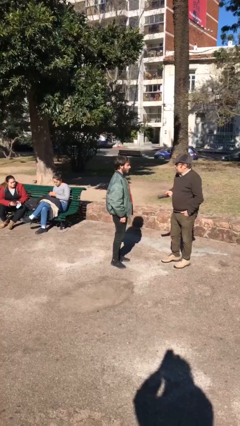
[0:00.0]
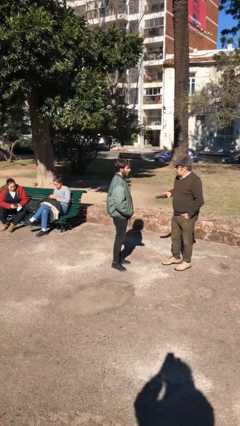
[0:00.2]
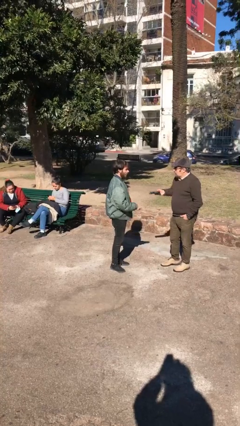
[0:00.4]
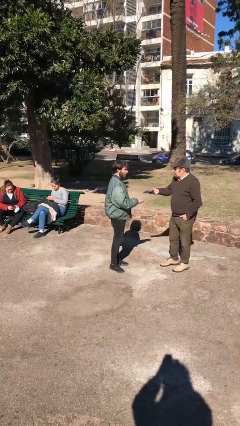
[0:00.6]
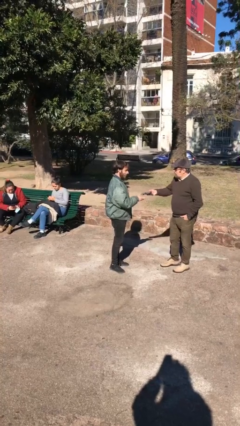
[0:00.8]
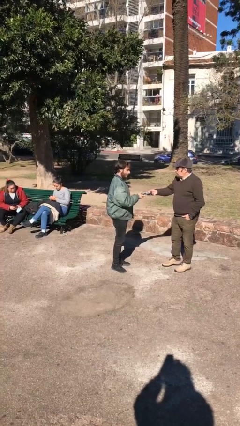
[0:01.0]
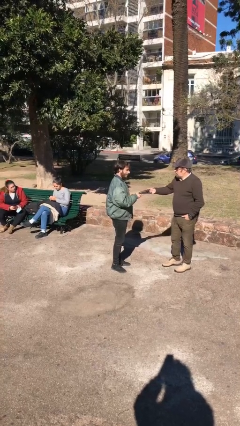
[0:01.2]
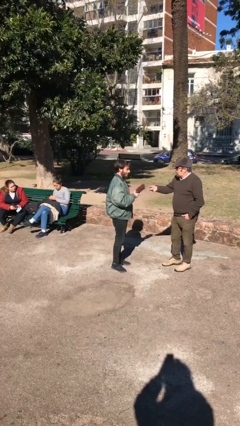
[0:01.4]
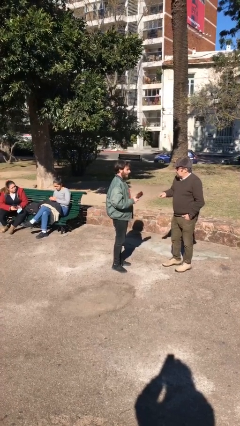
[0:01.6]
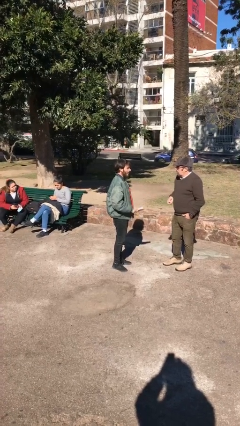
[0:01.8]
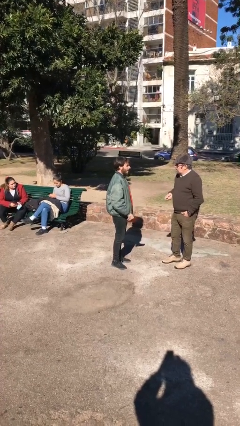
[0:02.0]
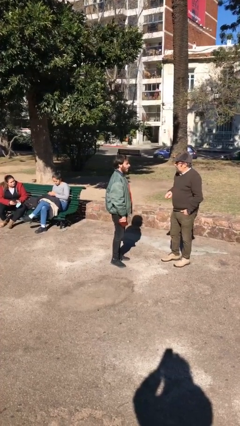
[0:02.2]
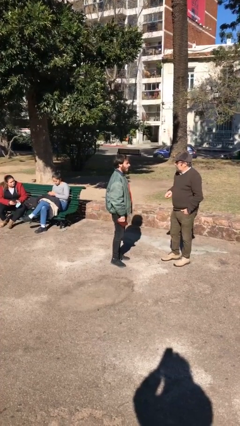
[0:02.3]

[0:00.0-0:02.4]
person transfers object to person

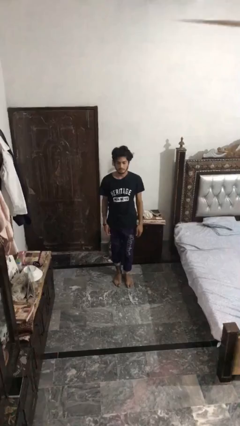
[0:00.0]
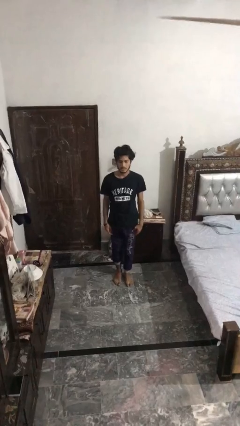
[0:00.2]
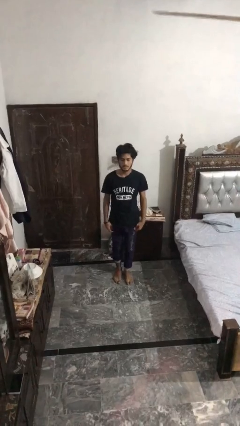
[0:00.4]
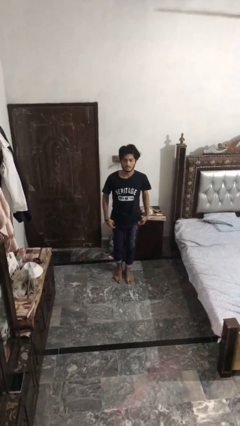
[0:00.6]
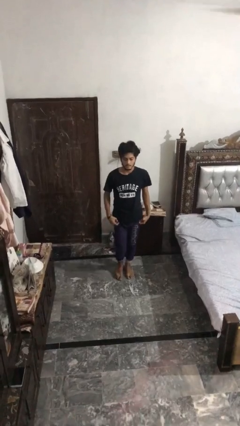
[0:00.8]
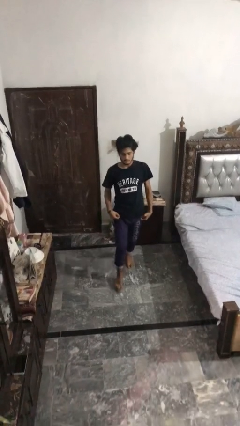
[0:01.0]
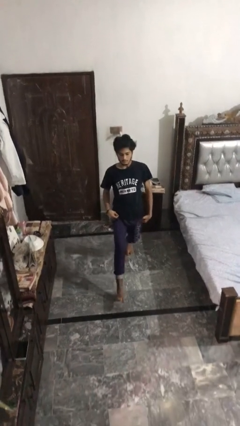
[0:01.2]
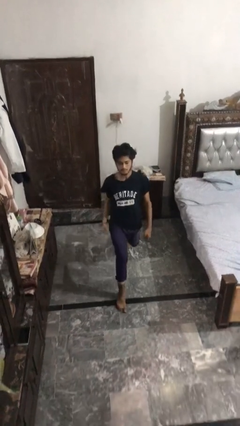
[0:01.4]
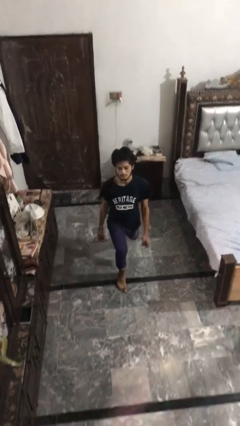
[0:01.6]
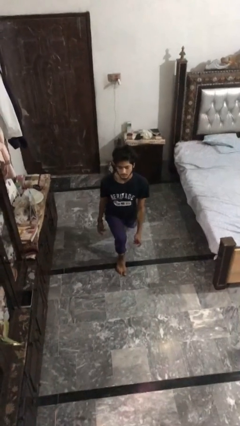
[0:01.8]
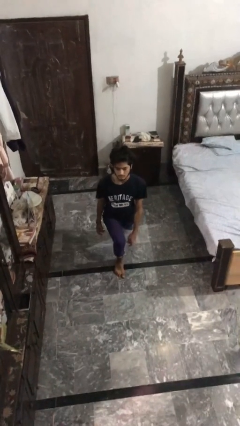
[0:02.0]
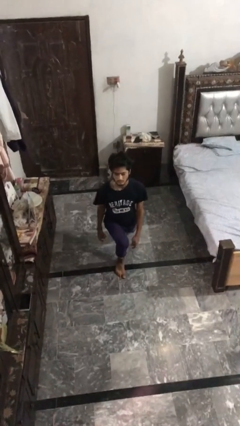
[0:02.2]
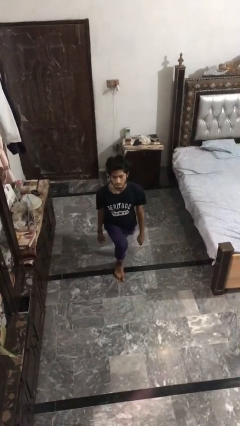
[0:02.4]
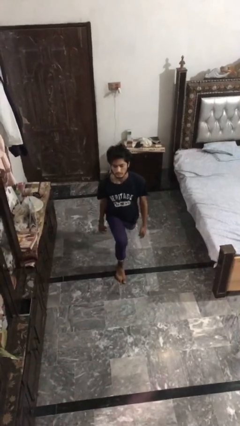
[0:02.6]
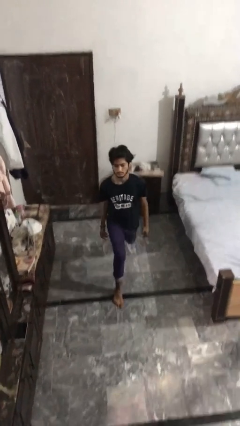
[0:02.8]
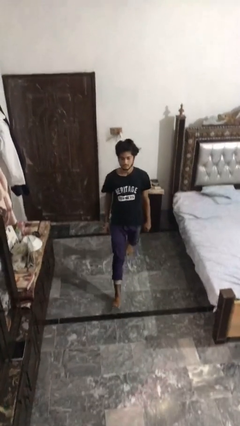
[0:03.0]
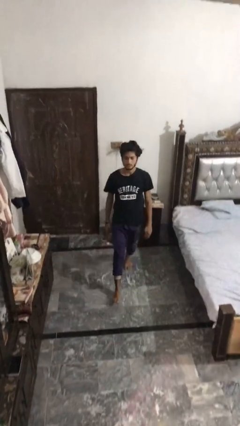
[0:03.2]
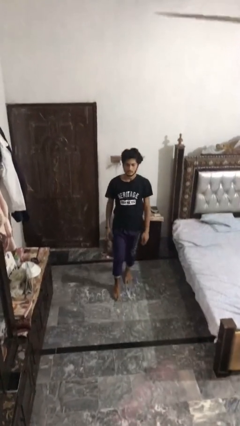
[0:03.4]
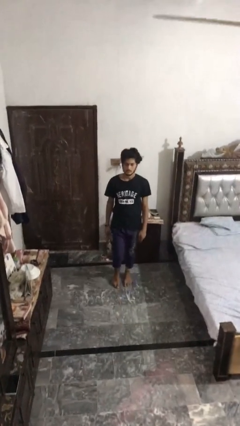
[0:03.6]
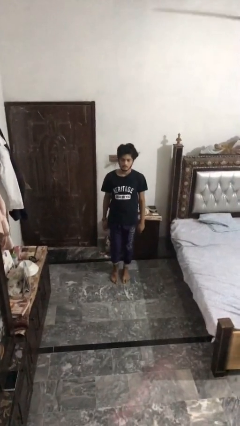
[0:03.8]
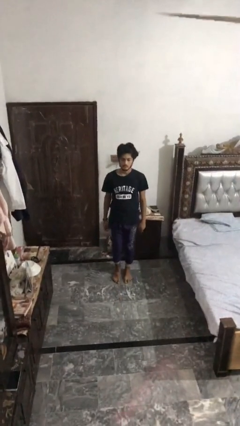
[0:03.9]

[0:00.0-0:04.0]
person exercises with lunges

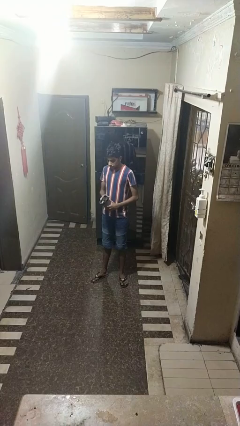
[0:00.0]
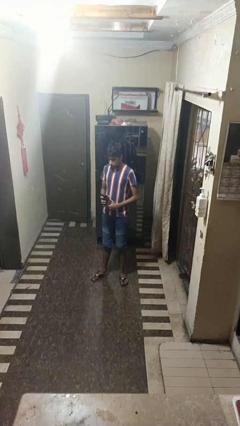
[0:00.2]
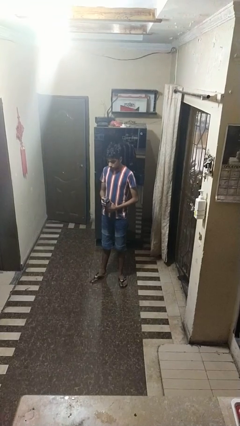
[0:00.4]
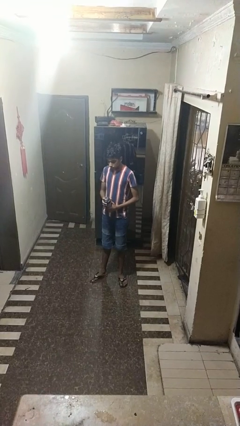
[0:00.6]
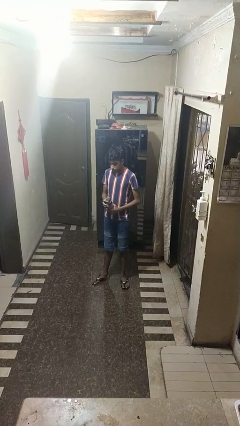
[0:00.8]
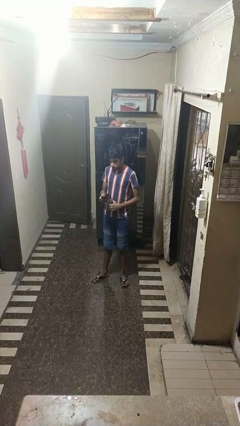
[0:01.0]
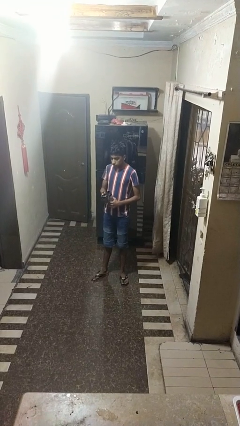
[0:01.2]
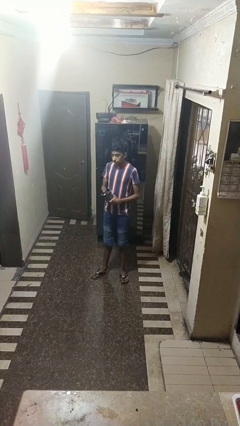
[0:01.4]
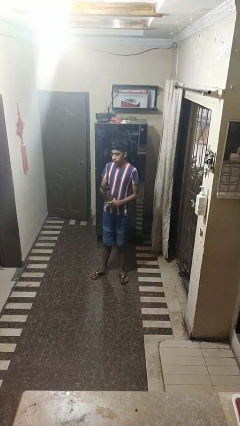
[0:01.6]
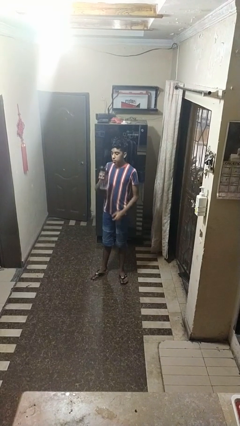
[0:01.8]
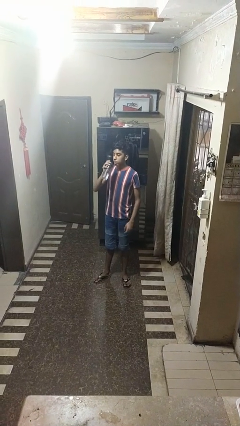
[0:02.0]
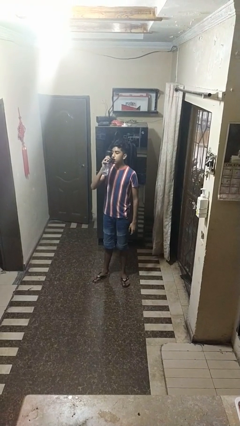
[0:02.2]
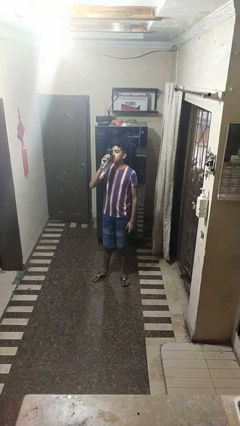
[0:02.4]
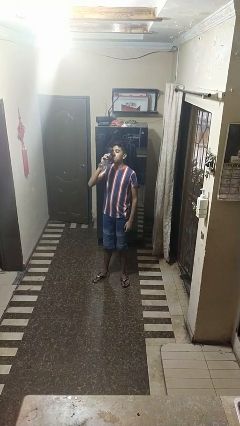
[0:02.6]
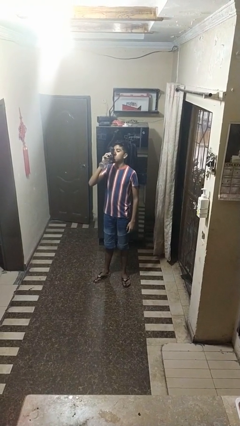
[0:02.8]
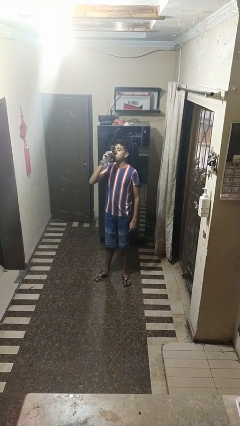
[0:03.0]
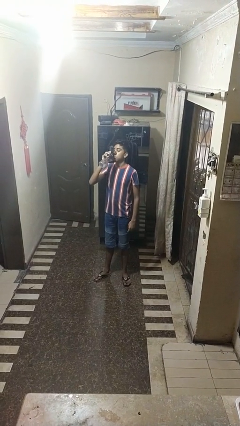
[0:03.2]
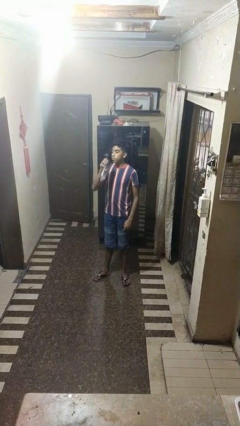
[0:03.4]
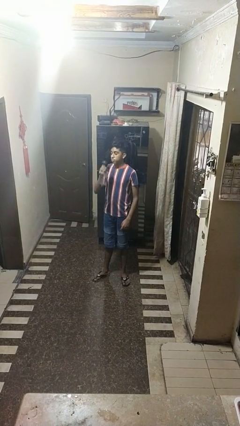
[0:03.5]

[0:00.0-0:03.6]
person drinks from bottle

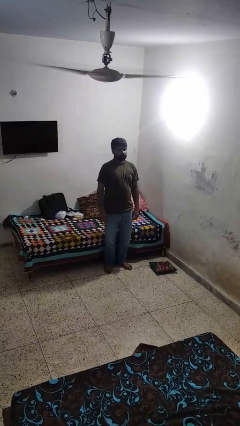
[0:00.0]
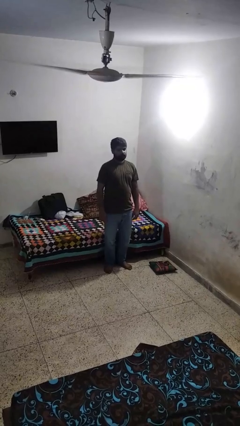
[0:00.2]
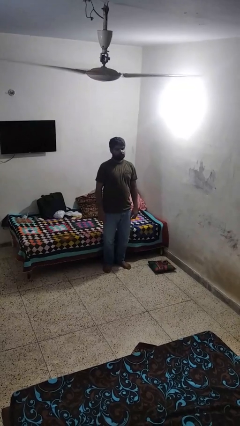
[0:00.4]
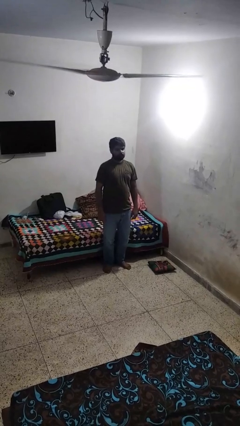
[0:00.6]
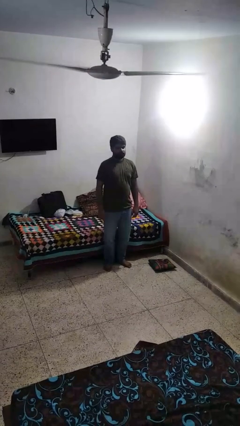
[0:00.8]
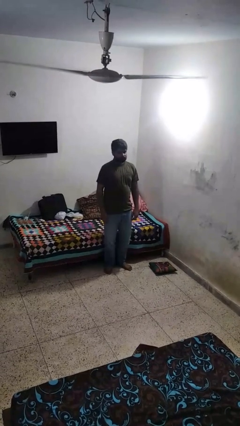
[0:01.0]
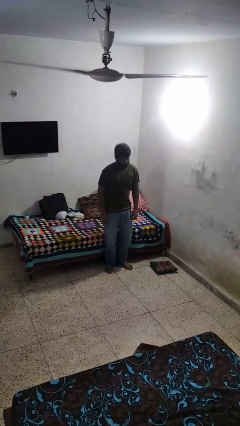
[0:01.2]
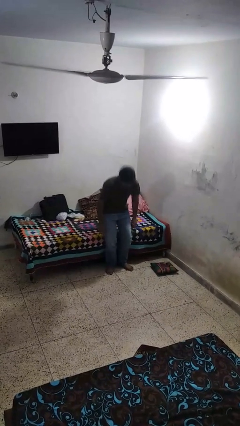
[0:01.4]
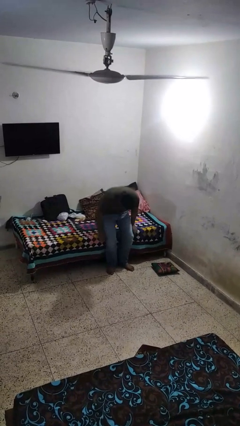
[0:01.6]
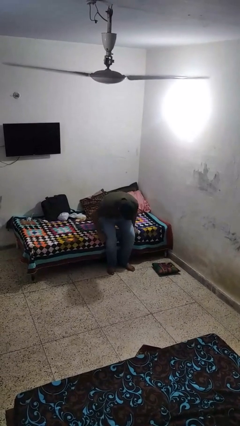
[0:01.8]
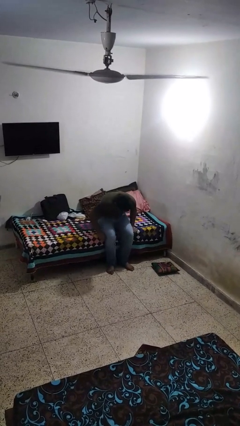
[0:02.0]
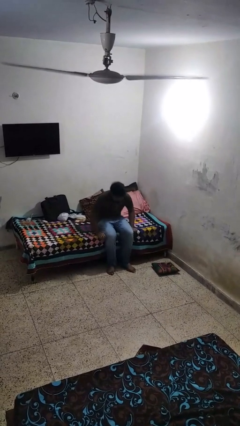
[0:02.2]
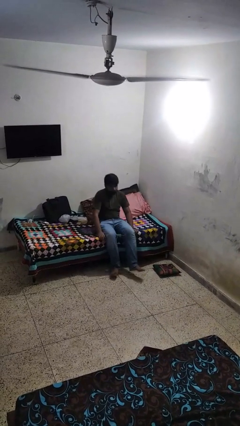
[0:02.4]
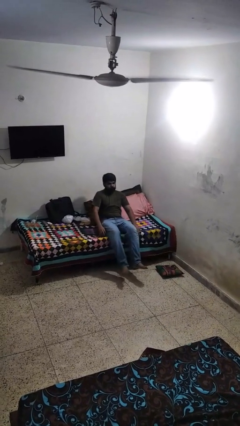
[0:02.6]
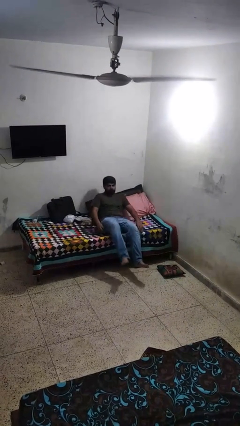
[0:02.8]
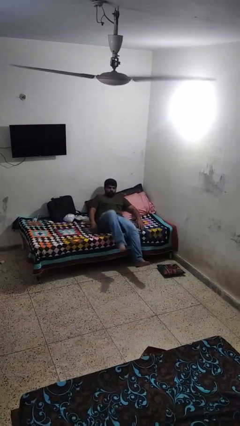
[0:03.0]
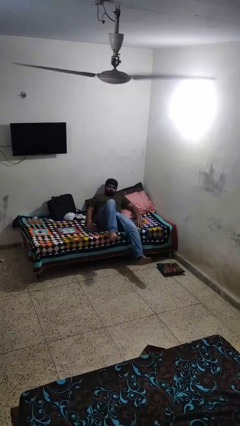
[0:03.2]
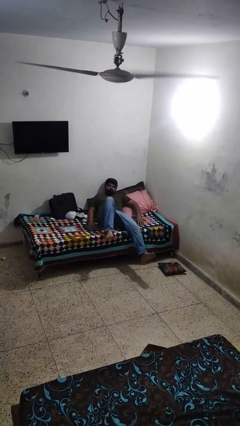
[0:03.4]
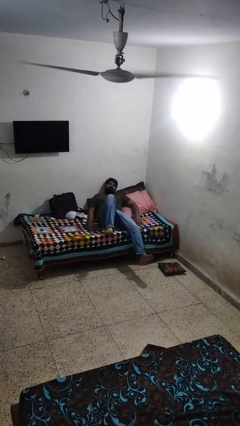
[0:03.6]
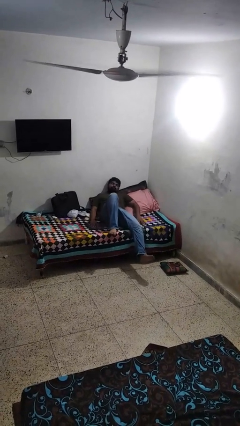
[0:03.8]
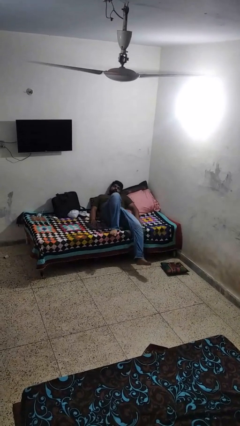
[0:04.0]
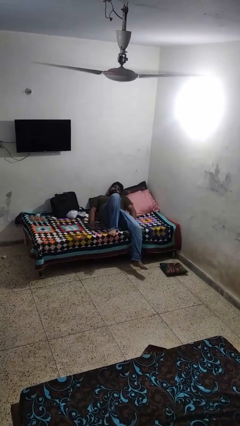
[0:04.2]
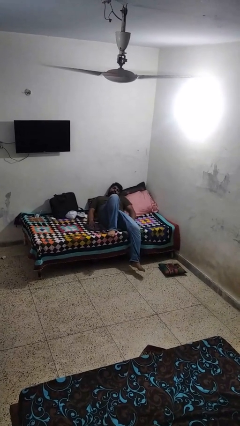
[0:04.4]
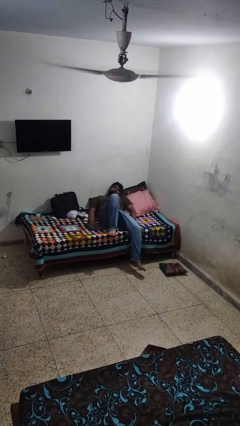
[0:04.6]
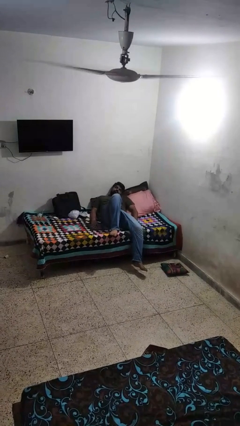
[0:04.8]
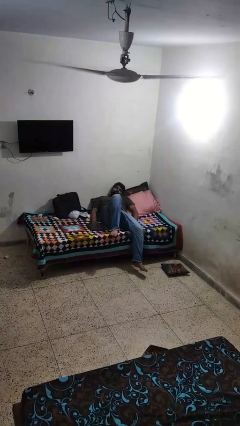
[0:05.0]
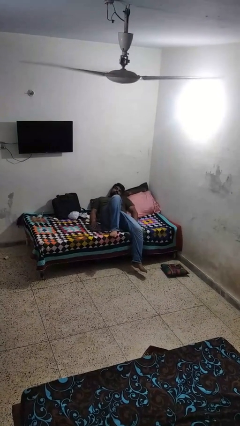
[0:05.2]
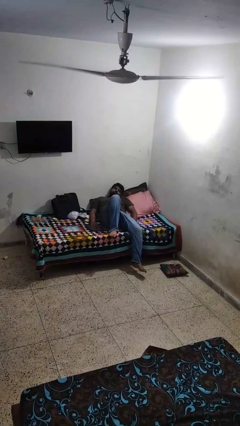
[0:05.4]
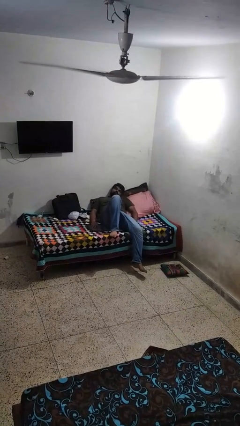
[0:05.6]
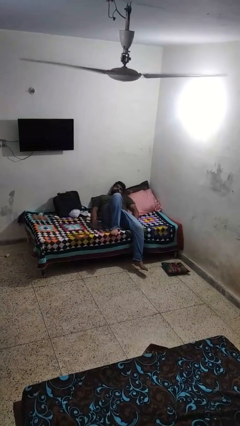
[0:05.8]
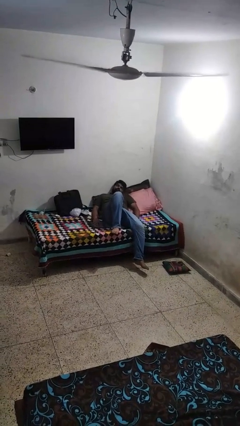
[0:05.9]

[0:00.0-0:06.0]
person lies down on bed

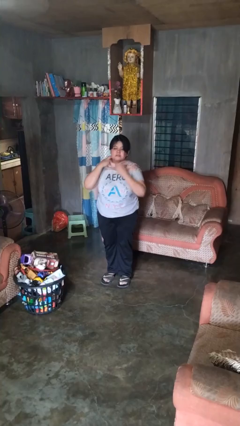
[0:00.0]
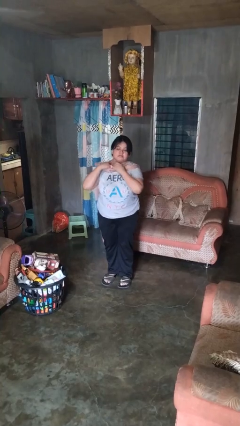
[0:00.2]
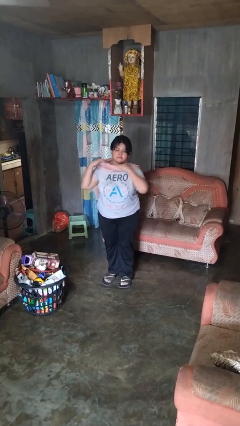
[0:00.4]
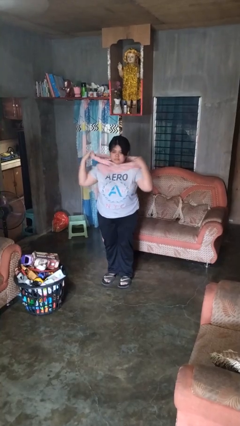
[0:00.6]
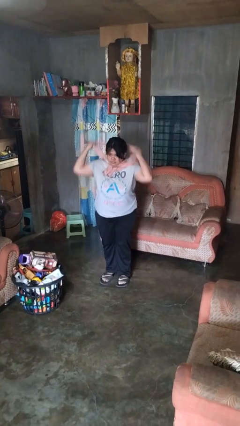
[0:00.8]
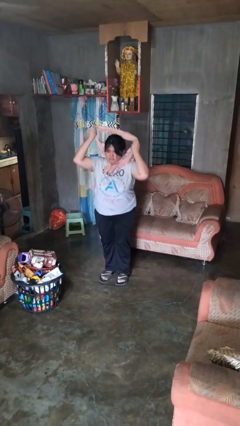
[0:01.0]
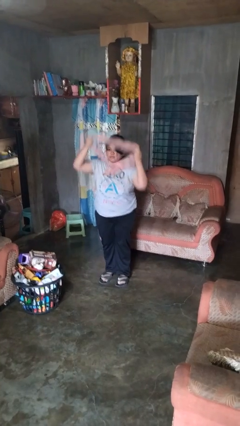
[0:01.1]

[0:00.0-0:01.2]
person takes off scarf

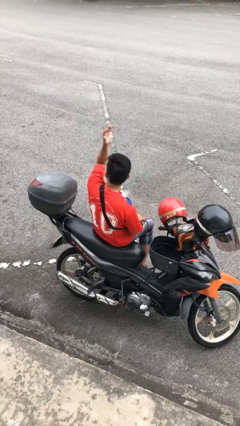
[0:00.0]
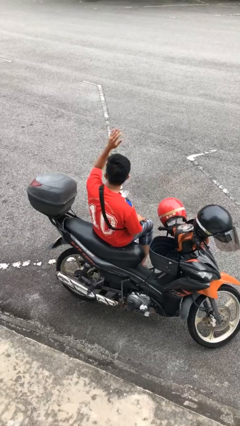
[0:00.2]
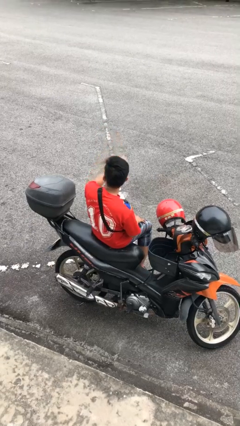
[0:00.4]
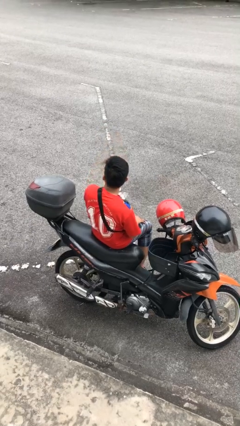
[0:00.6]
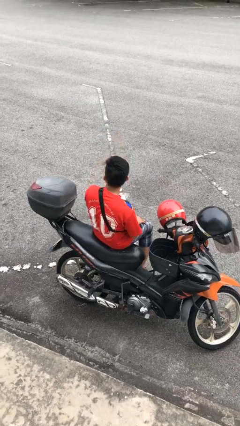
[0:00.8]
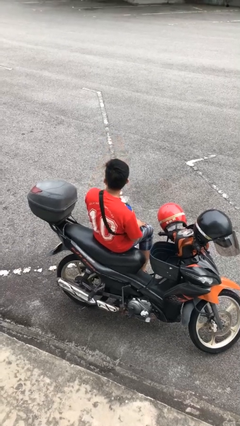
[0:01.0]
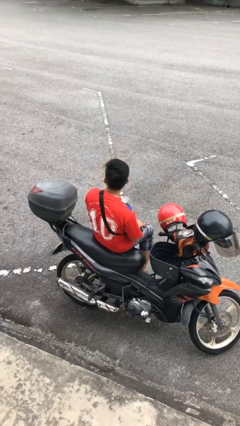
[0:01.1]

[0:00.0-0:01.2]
person gestures swipe down
